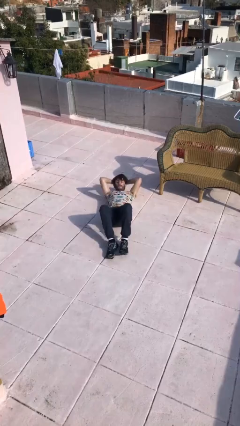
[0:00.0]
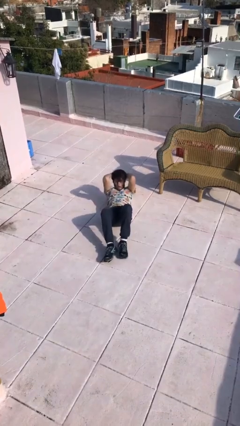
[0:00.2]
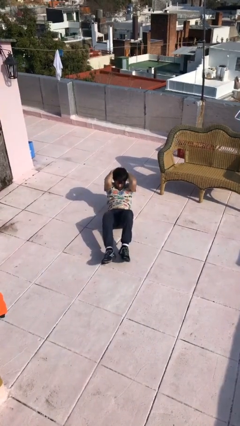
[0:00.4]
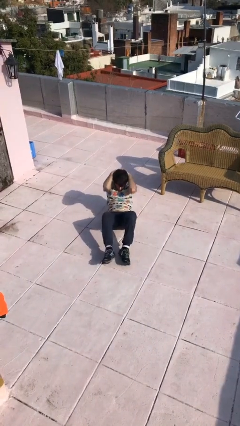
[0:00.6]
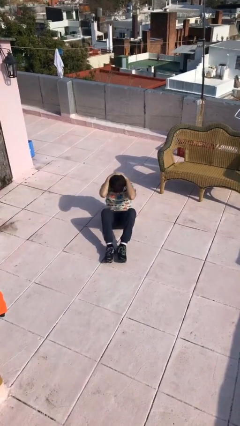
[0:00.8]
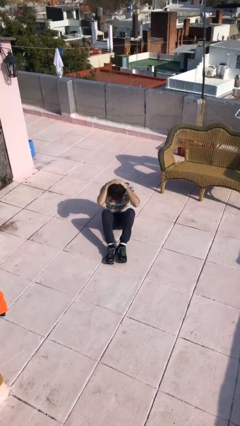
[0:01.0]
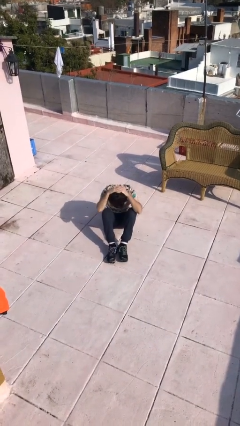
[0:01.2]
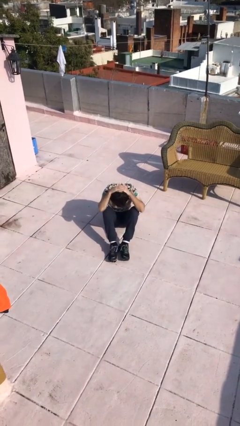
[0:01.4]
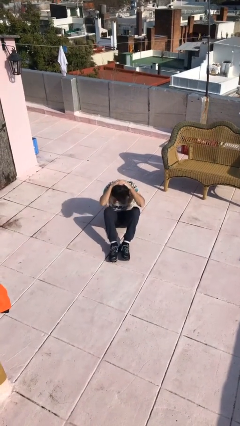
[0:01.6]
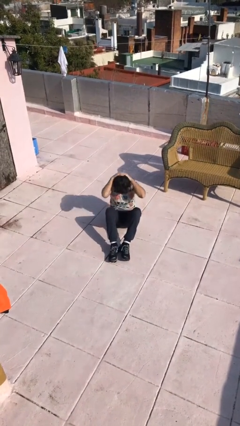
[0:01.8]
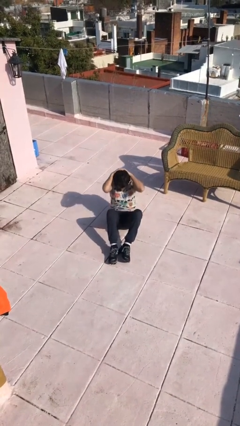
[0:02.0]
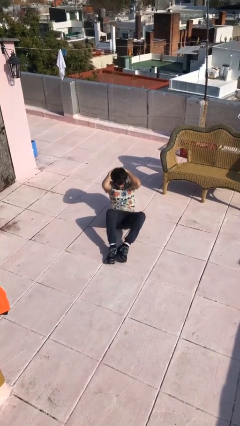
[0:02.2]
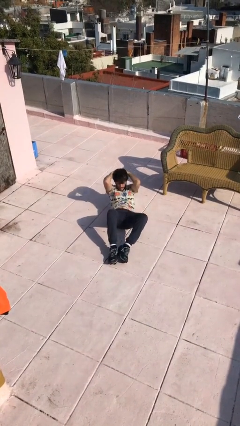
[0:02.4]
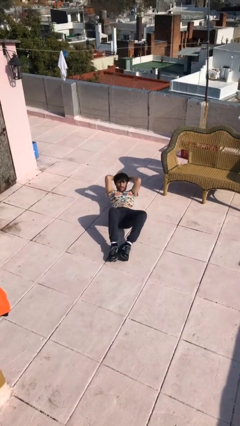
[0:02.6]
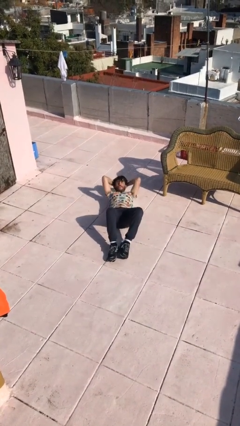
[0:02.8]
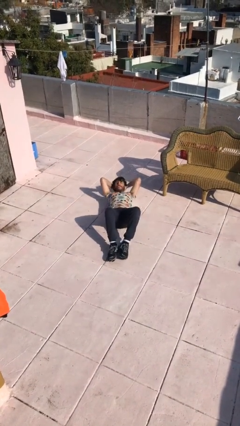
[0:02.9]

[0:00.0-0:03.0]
person exercises with situp

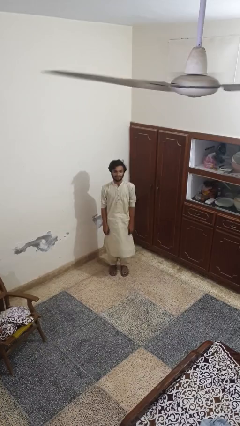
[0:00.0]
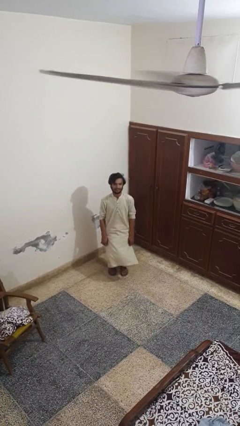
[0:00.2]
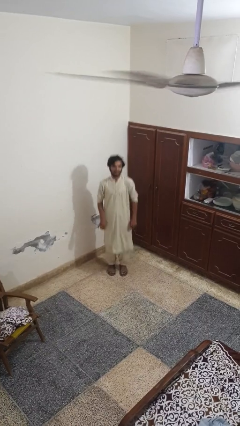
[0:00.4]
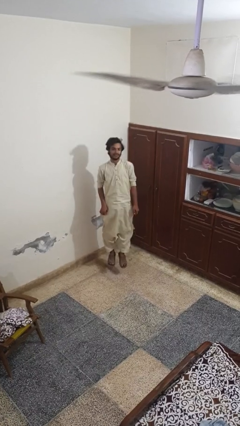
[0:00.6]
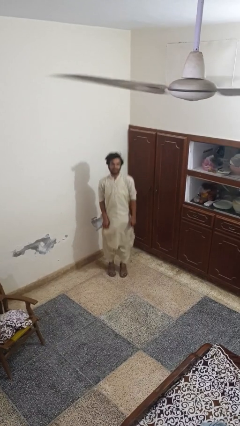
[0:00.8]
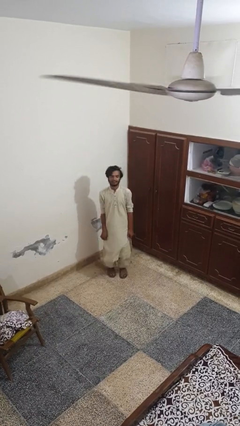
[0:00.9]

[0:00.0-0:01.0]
person jumps

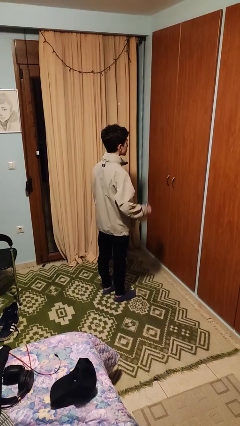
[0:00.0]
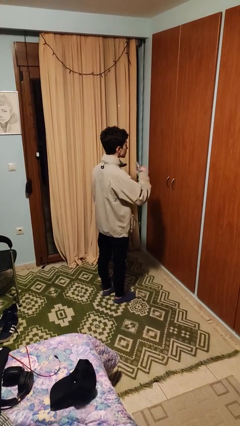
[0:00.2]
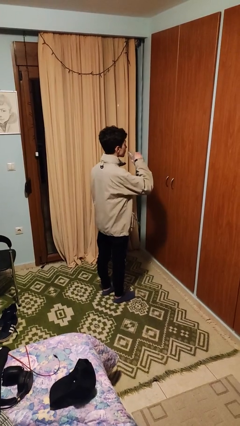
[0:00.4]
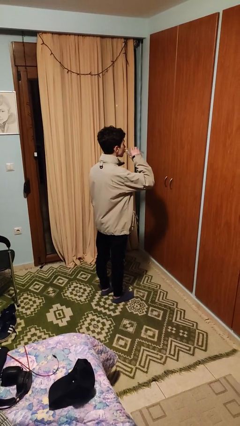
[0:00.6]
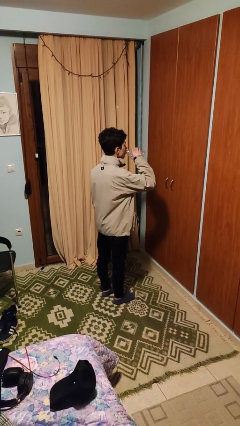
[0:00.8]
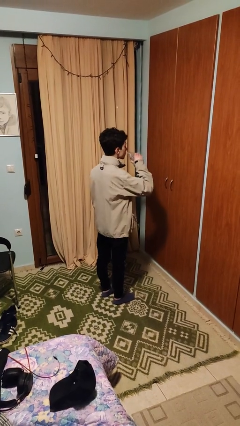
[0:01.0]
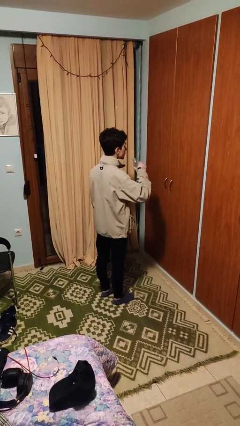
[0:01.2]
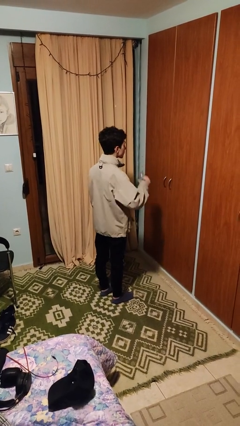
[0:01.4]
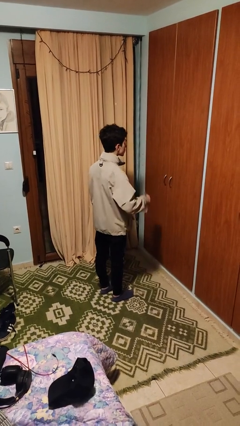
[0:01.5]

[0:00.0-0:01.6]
person drinks from bottle

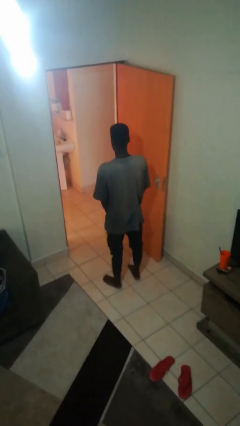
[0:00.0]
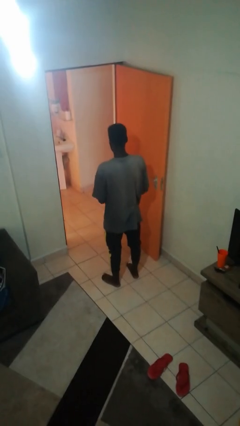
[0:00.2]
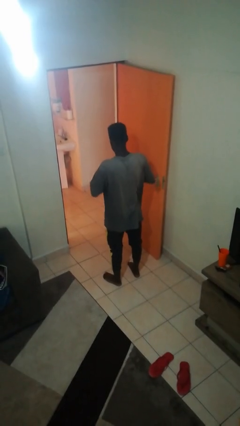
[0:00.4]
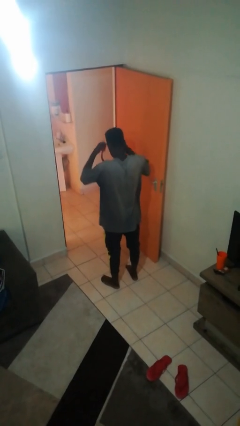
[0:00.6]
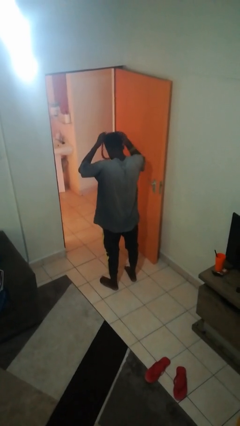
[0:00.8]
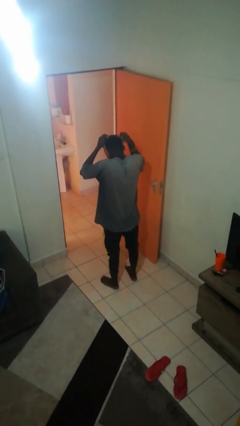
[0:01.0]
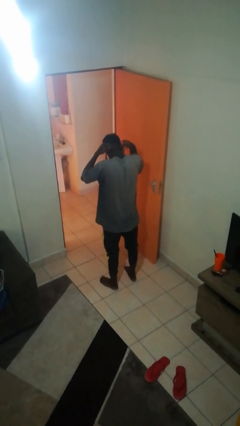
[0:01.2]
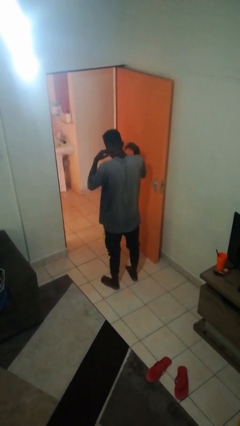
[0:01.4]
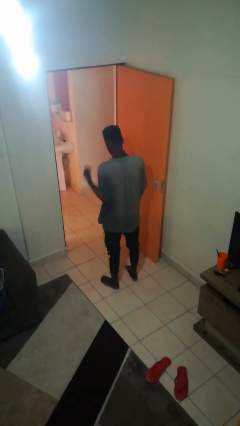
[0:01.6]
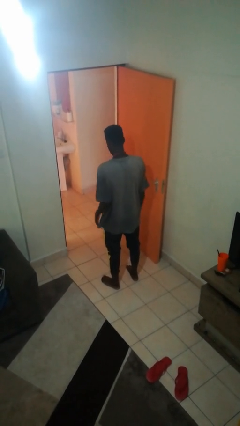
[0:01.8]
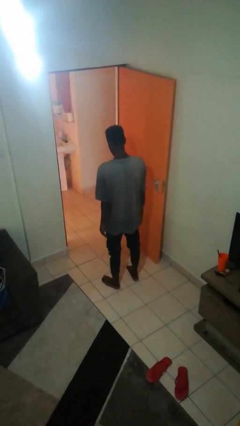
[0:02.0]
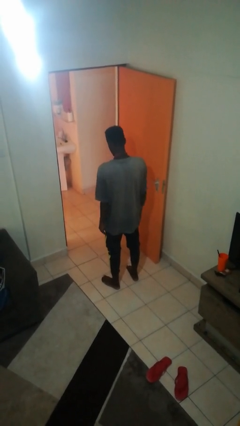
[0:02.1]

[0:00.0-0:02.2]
person puts on necklace

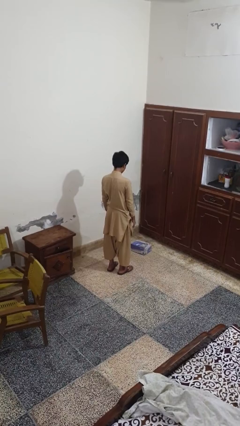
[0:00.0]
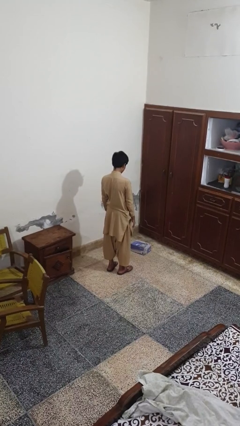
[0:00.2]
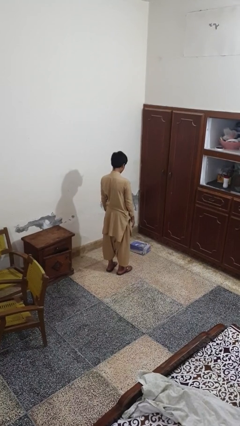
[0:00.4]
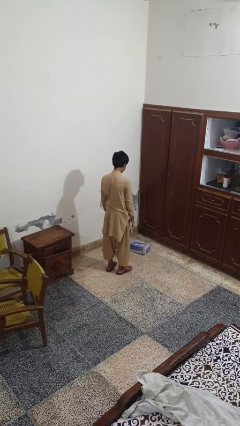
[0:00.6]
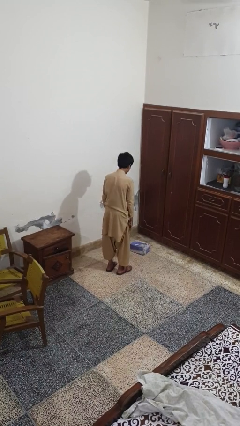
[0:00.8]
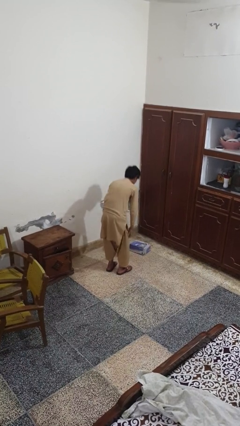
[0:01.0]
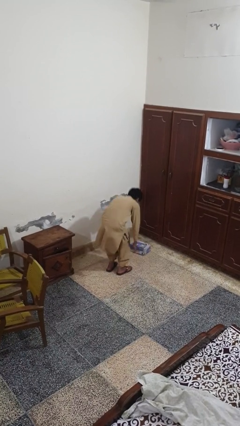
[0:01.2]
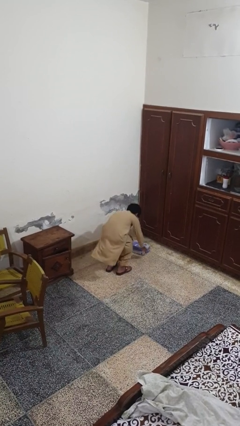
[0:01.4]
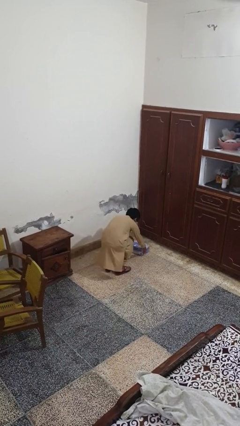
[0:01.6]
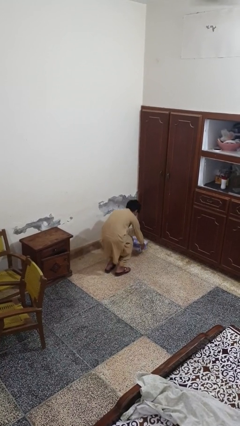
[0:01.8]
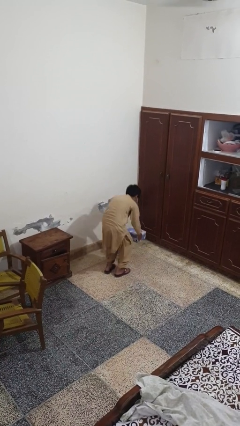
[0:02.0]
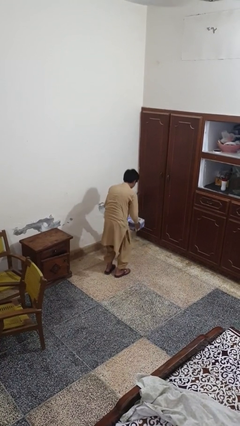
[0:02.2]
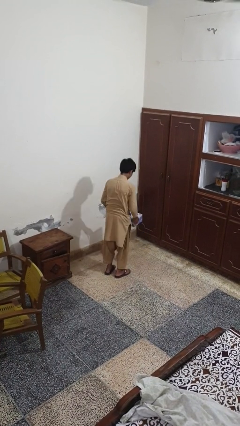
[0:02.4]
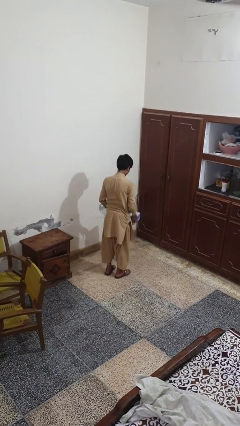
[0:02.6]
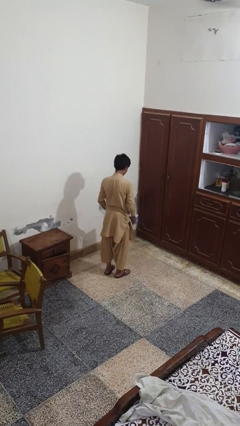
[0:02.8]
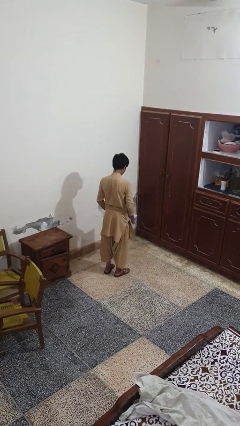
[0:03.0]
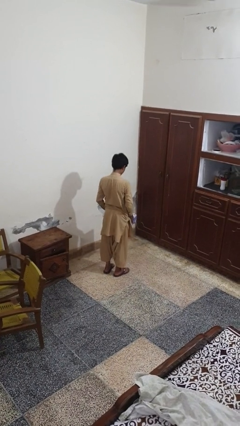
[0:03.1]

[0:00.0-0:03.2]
person picks up object from floor

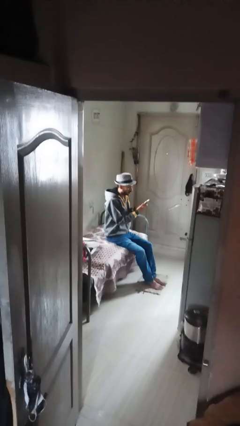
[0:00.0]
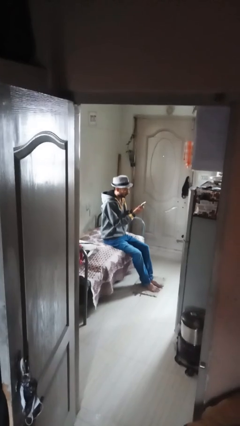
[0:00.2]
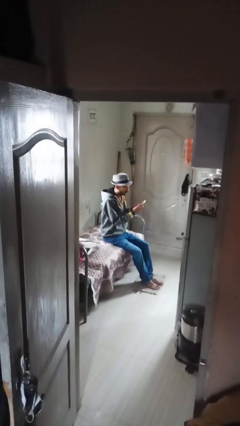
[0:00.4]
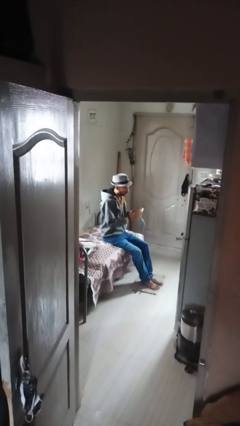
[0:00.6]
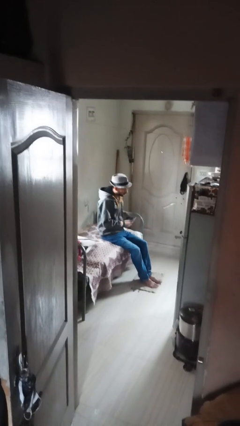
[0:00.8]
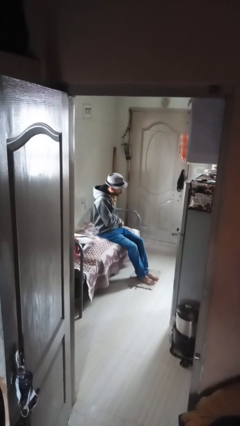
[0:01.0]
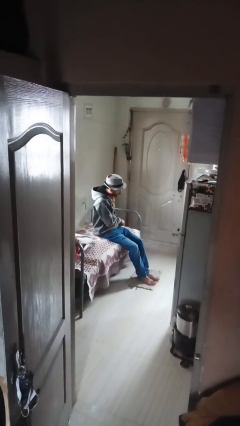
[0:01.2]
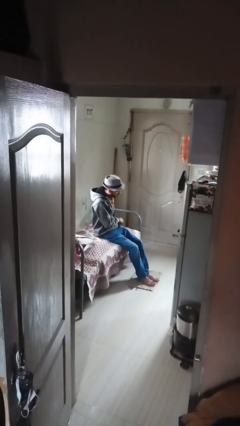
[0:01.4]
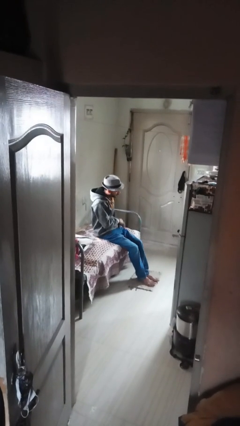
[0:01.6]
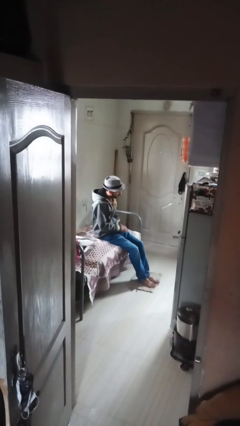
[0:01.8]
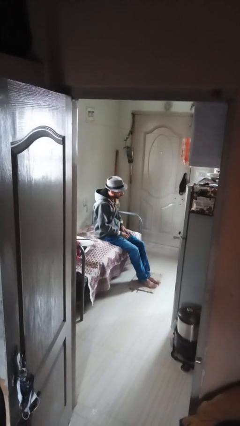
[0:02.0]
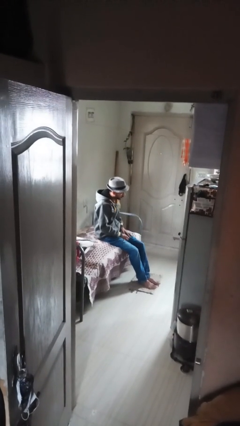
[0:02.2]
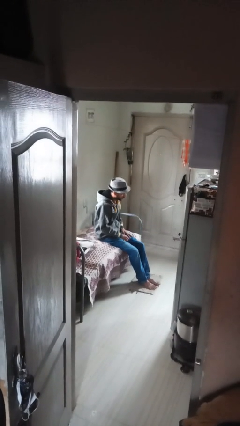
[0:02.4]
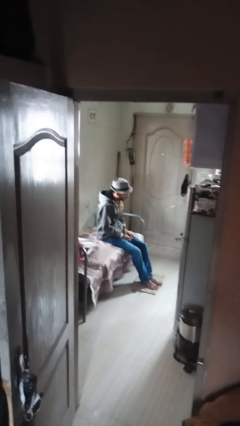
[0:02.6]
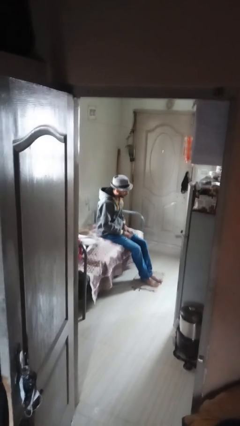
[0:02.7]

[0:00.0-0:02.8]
person puts phone into pocket

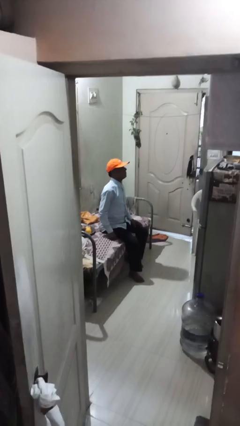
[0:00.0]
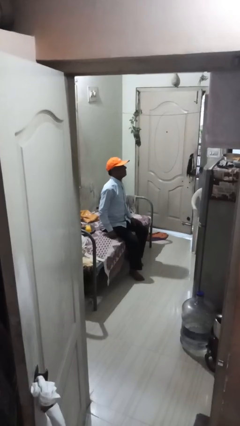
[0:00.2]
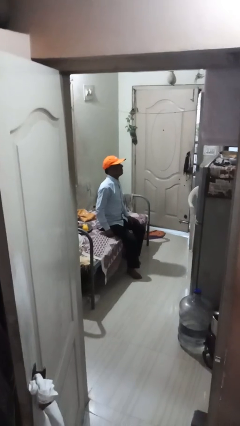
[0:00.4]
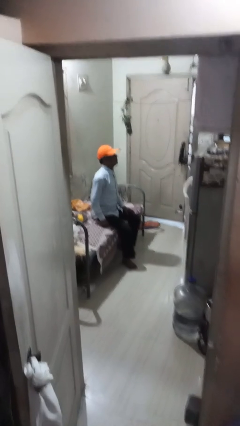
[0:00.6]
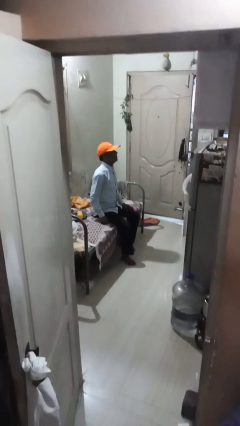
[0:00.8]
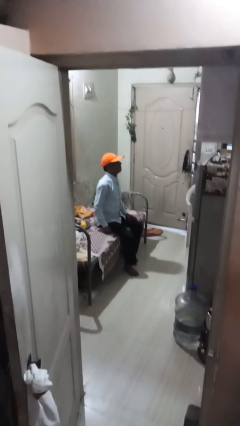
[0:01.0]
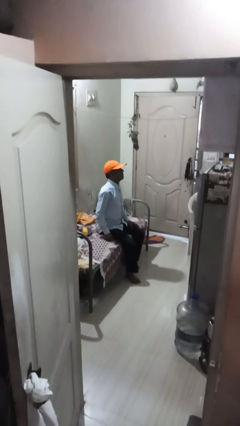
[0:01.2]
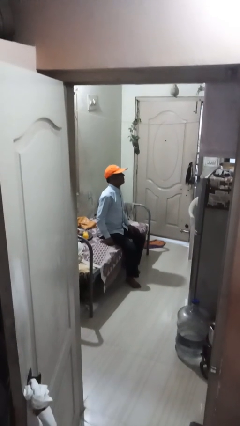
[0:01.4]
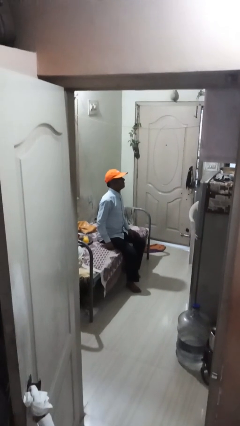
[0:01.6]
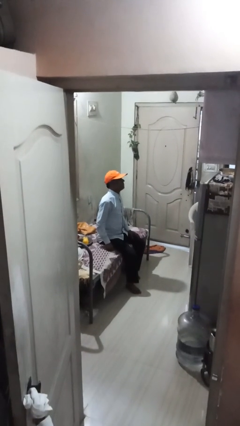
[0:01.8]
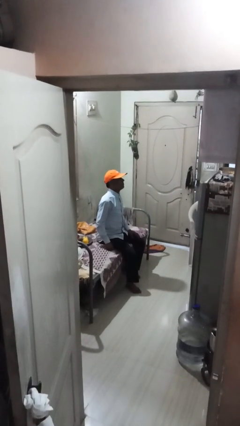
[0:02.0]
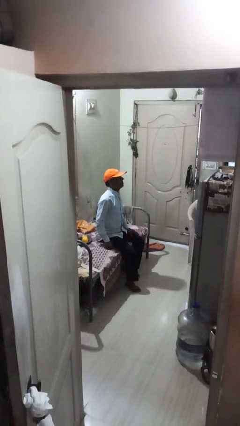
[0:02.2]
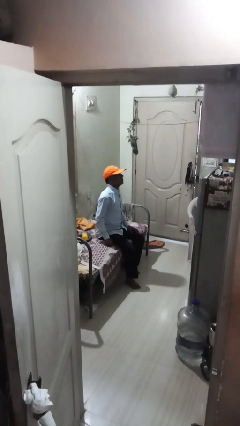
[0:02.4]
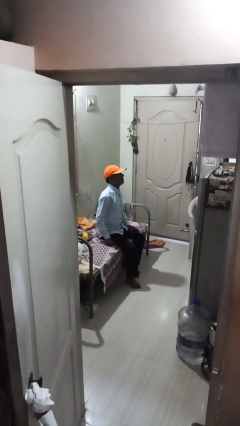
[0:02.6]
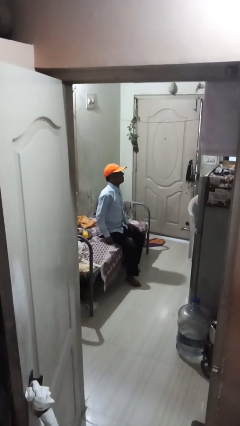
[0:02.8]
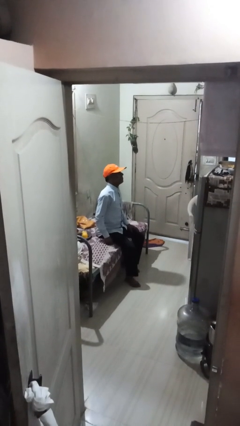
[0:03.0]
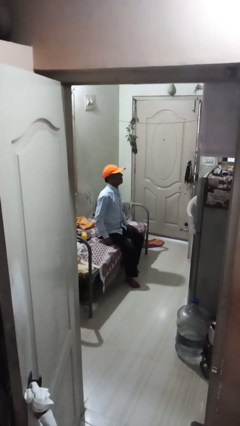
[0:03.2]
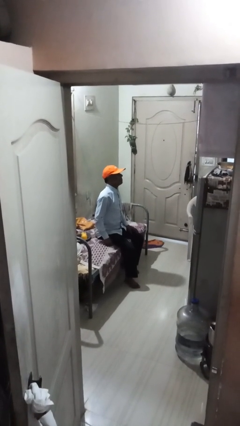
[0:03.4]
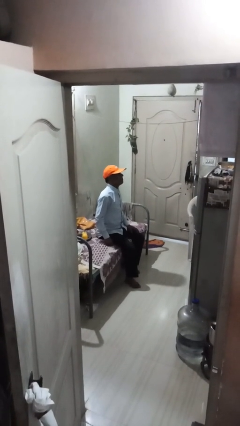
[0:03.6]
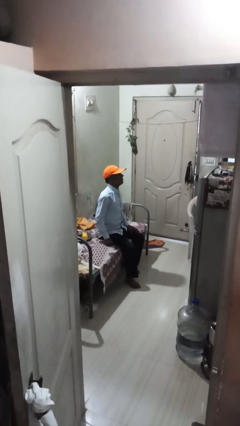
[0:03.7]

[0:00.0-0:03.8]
person sticks out tongue
